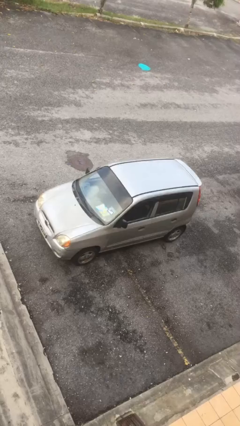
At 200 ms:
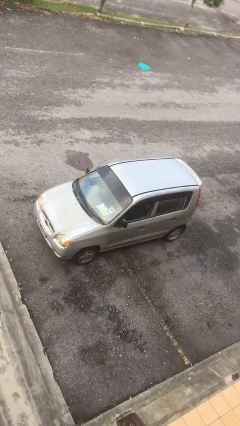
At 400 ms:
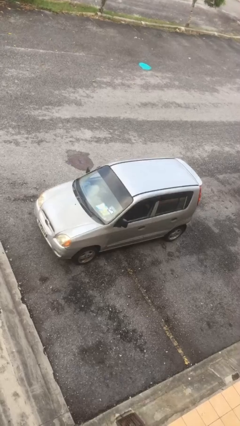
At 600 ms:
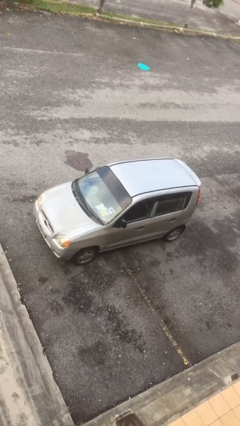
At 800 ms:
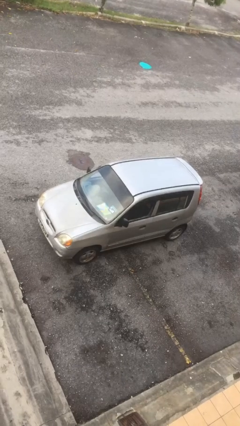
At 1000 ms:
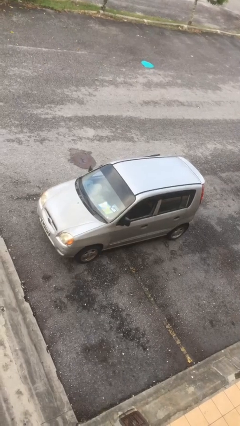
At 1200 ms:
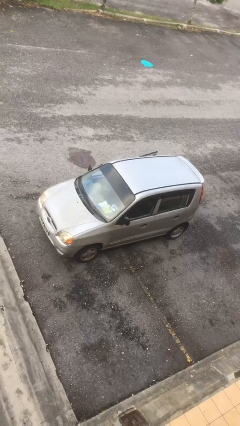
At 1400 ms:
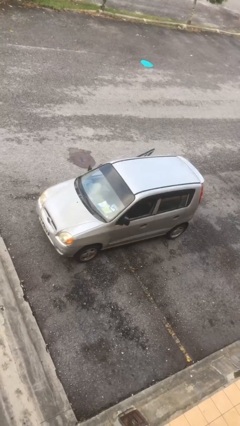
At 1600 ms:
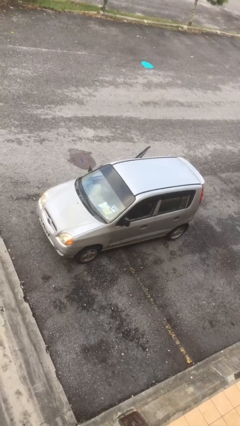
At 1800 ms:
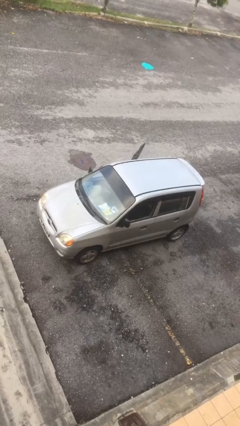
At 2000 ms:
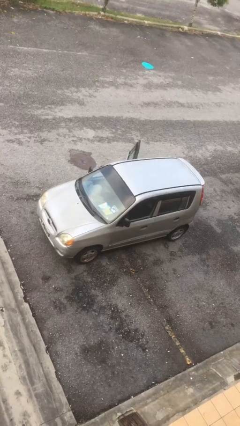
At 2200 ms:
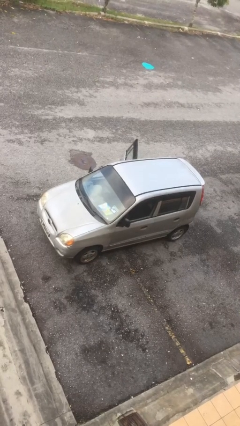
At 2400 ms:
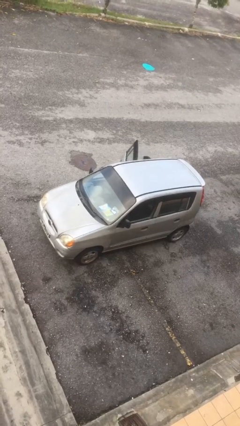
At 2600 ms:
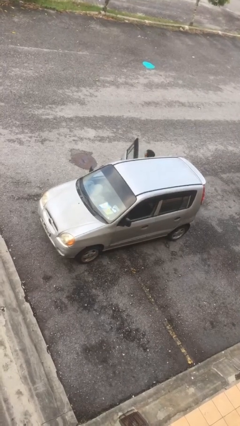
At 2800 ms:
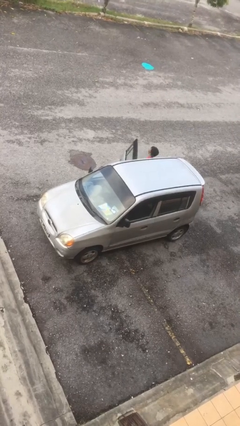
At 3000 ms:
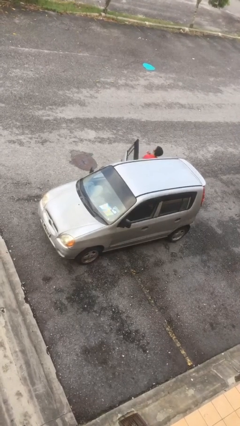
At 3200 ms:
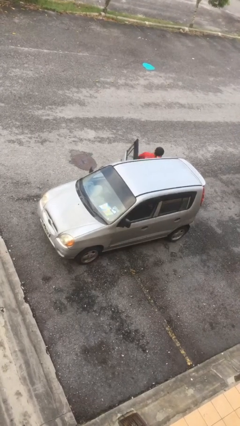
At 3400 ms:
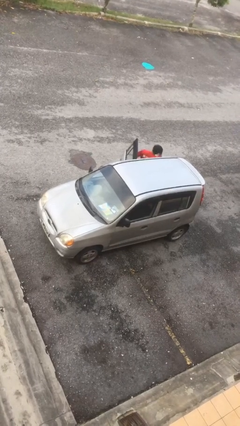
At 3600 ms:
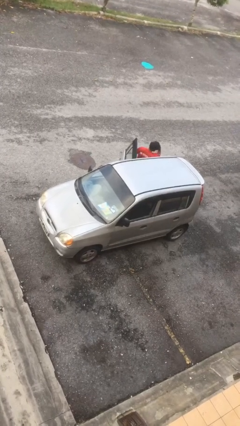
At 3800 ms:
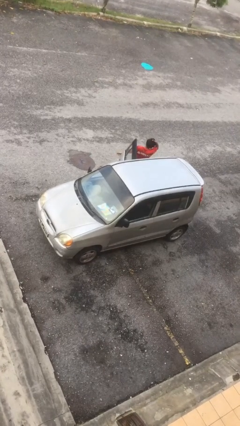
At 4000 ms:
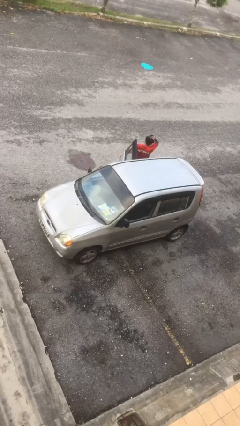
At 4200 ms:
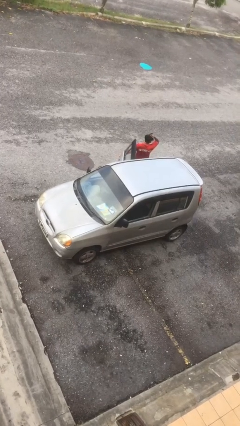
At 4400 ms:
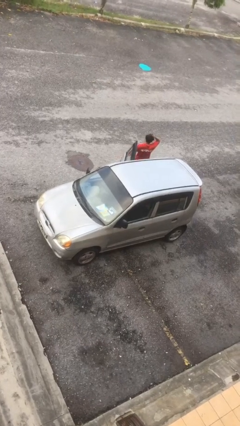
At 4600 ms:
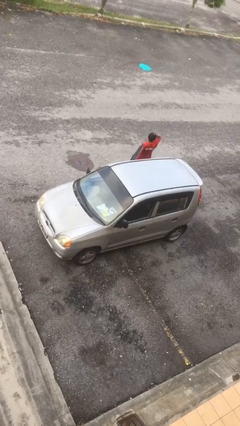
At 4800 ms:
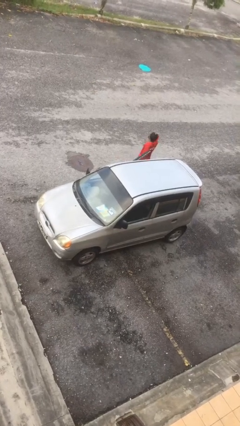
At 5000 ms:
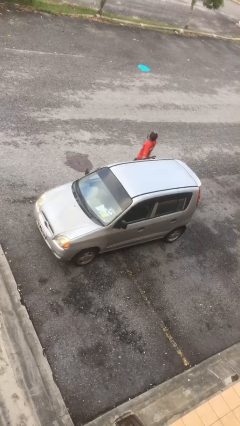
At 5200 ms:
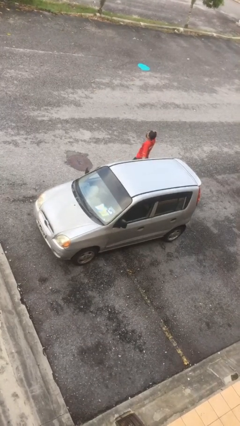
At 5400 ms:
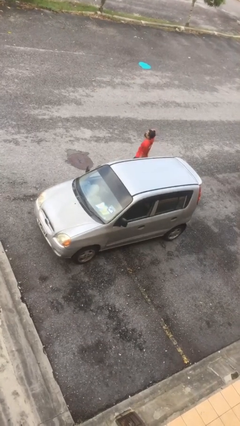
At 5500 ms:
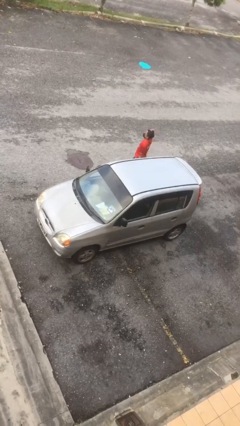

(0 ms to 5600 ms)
car drops off person

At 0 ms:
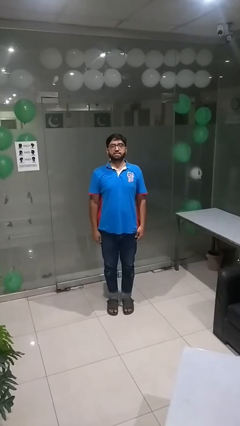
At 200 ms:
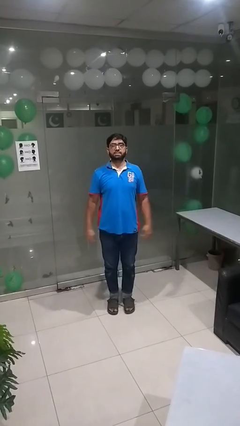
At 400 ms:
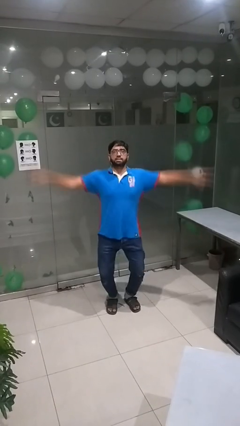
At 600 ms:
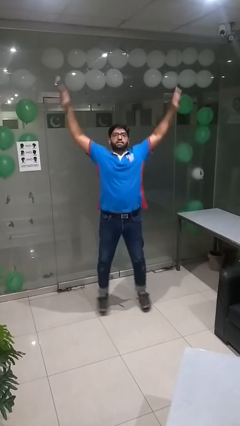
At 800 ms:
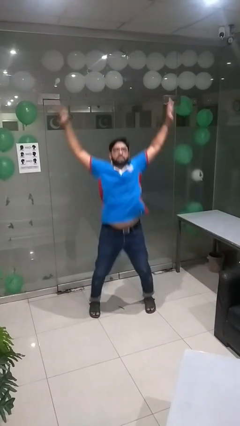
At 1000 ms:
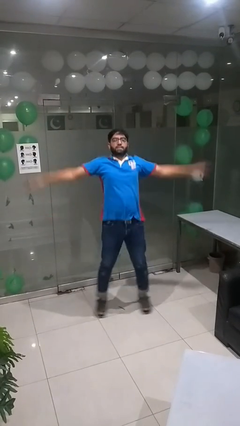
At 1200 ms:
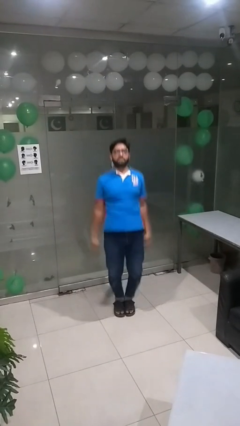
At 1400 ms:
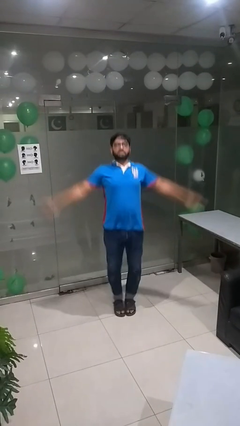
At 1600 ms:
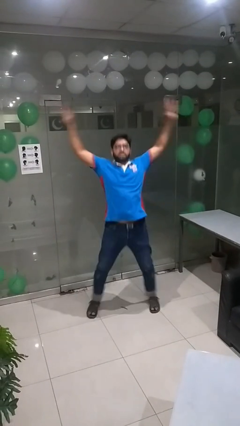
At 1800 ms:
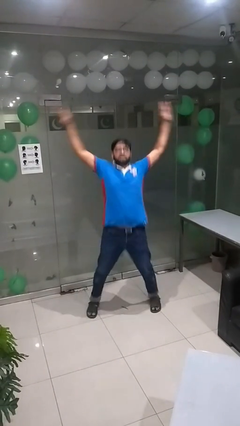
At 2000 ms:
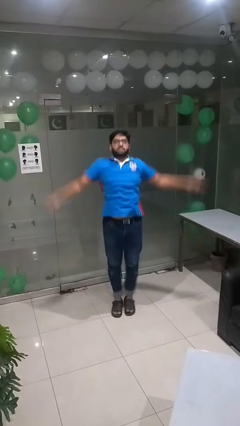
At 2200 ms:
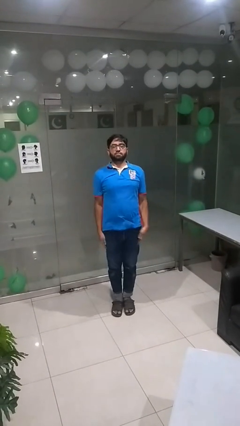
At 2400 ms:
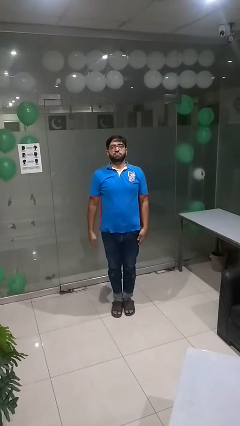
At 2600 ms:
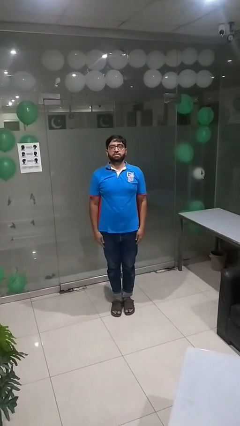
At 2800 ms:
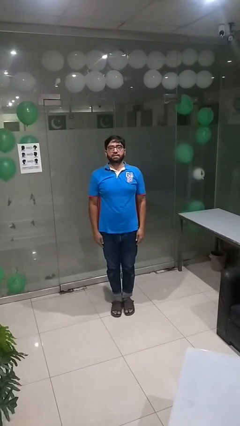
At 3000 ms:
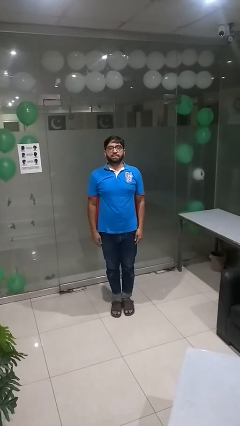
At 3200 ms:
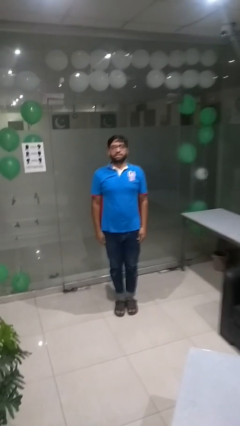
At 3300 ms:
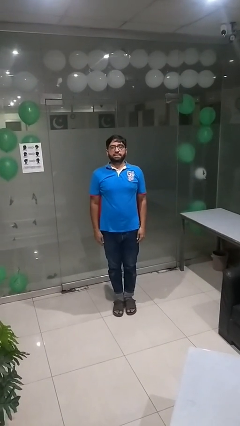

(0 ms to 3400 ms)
person exercises with jumping jacks

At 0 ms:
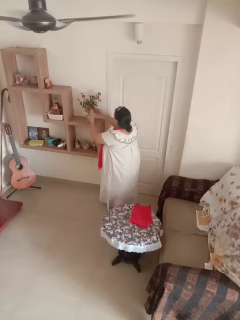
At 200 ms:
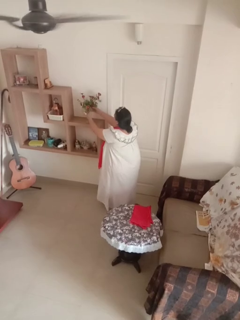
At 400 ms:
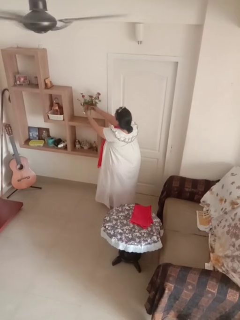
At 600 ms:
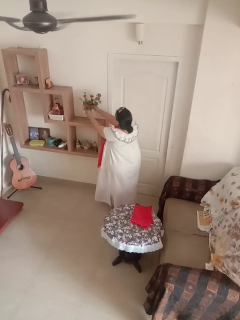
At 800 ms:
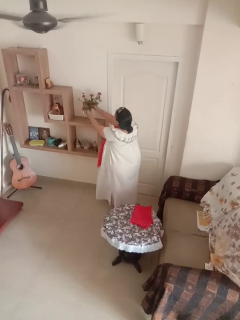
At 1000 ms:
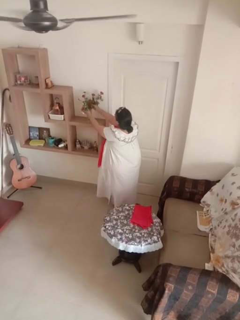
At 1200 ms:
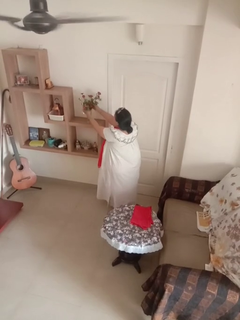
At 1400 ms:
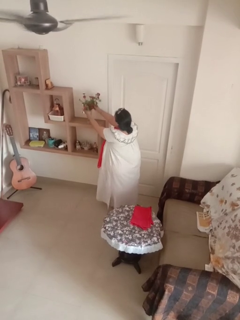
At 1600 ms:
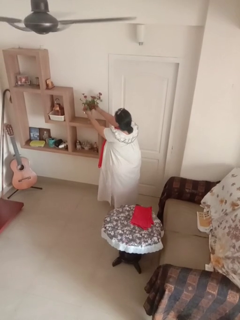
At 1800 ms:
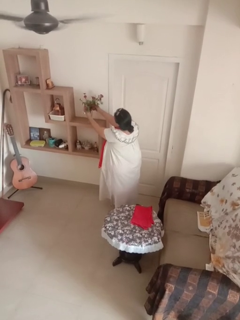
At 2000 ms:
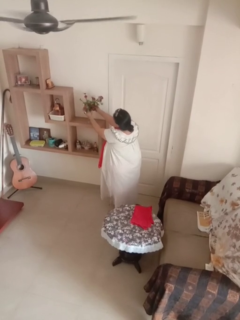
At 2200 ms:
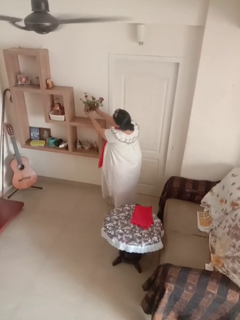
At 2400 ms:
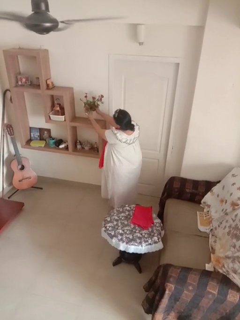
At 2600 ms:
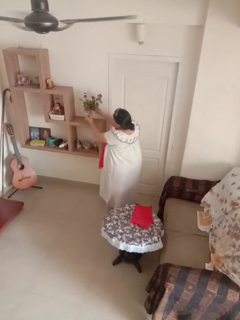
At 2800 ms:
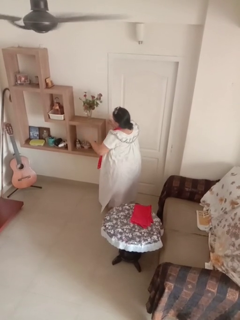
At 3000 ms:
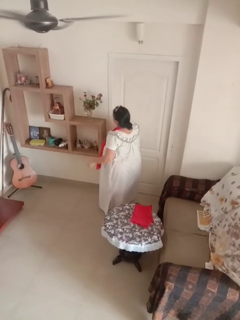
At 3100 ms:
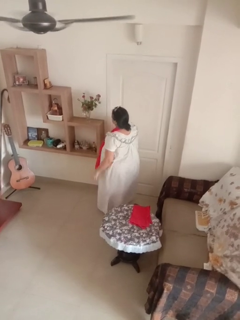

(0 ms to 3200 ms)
person arranges flowers in vase

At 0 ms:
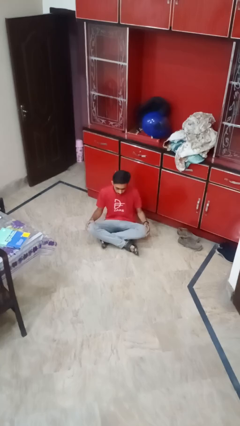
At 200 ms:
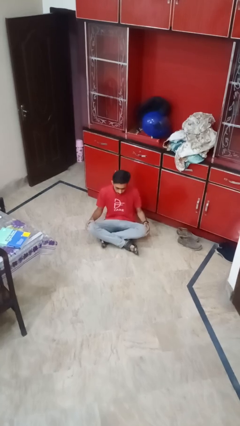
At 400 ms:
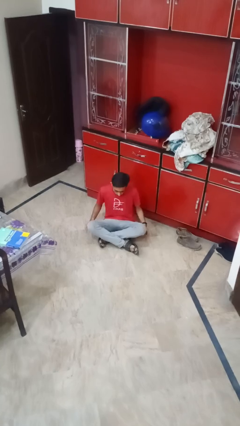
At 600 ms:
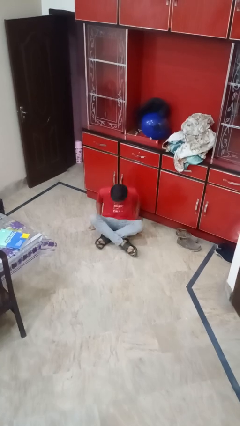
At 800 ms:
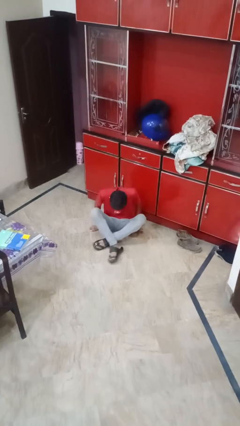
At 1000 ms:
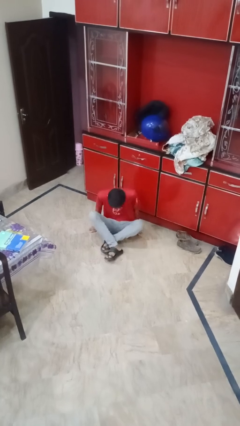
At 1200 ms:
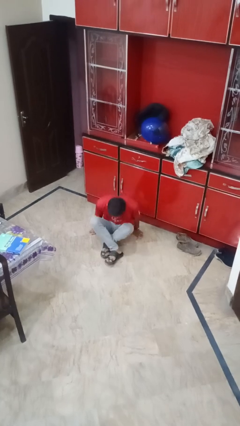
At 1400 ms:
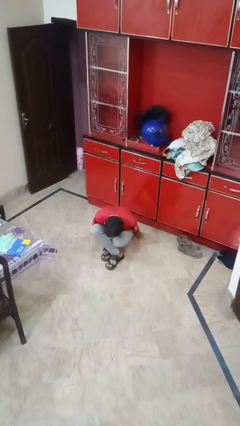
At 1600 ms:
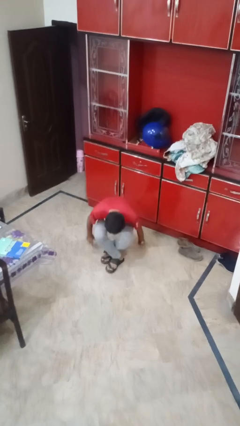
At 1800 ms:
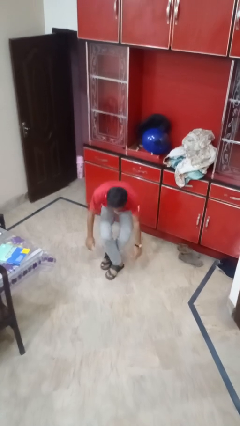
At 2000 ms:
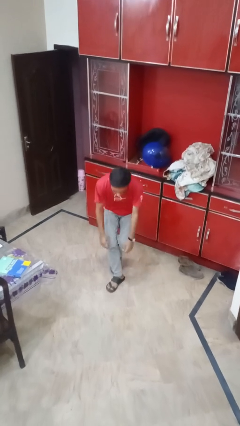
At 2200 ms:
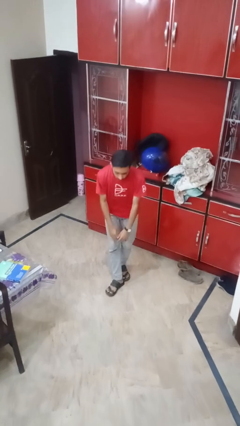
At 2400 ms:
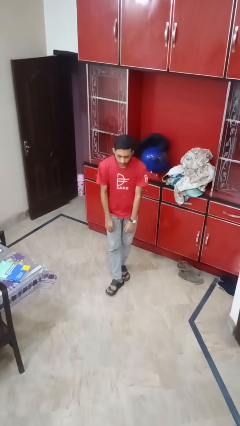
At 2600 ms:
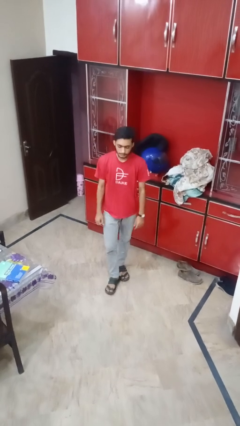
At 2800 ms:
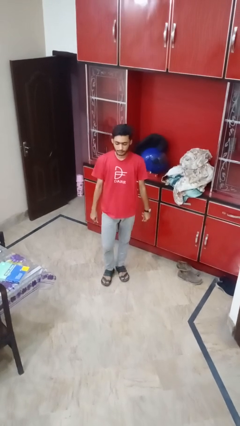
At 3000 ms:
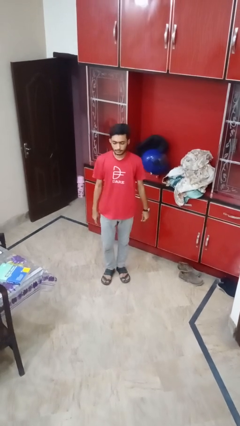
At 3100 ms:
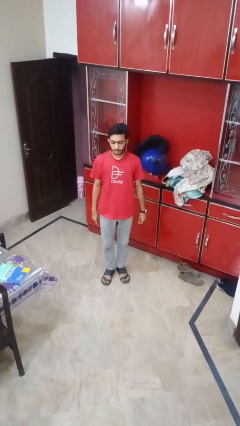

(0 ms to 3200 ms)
person stands up from floor

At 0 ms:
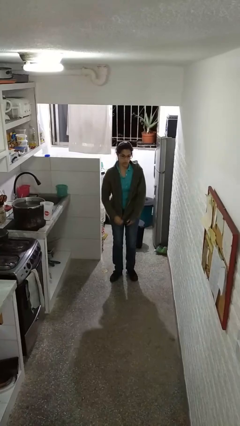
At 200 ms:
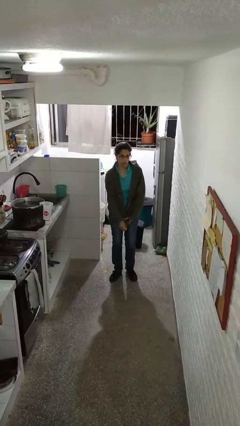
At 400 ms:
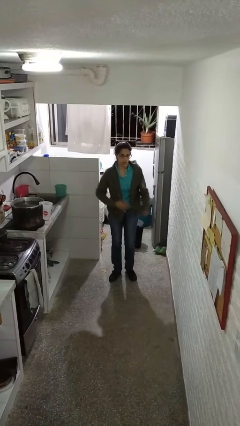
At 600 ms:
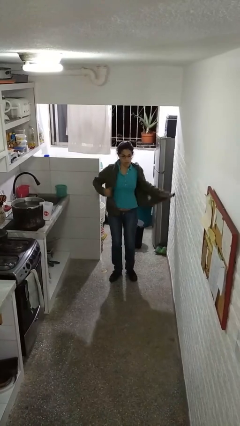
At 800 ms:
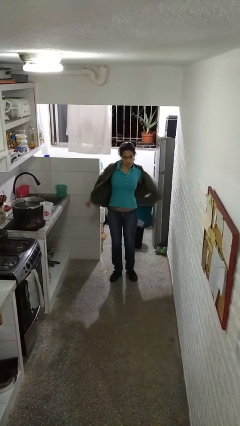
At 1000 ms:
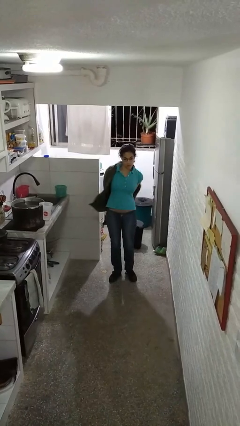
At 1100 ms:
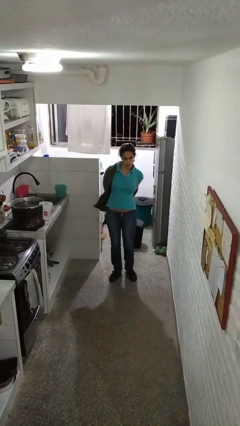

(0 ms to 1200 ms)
person unzips jacket

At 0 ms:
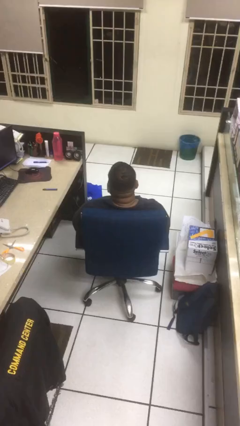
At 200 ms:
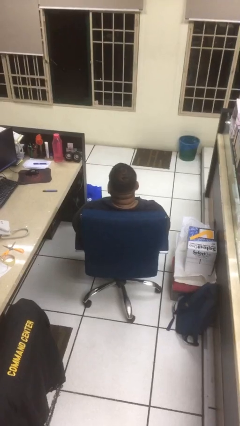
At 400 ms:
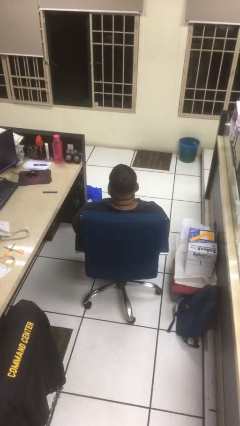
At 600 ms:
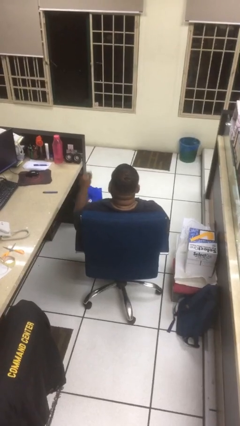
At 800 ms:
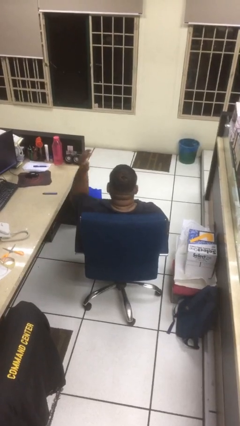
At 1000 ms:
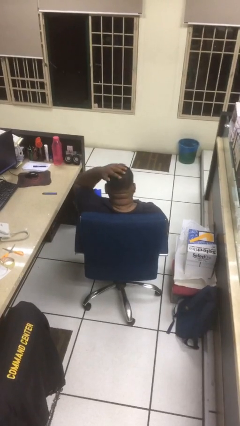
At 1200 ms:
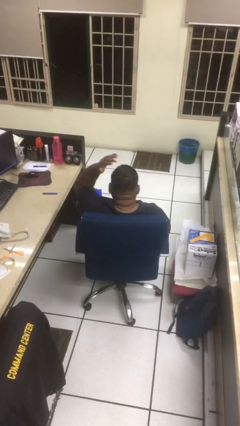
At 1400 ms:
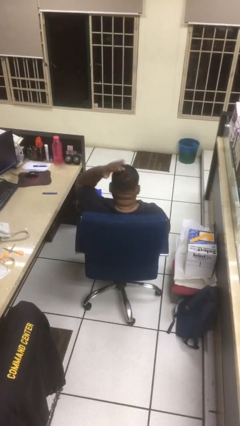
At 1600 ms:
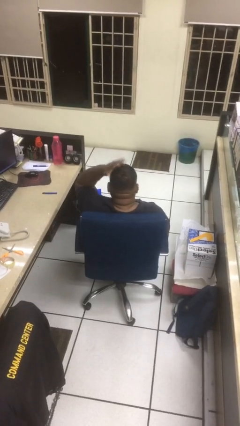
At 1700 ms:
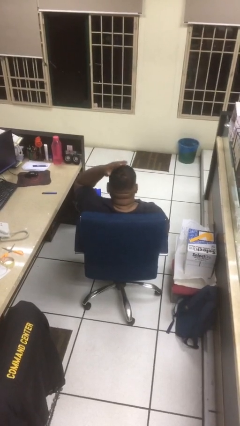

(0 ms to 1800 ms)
person pats head
